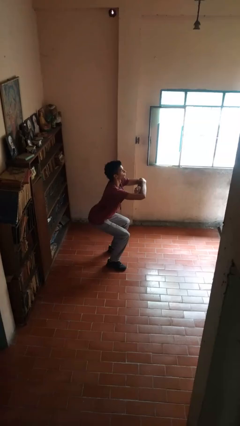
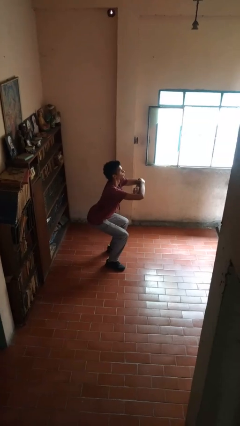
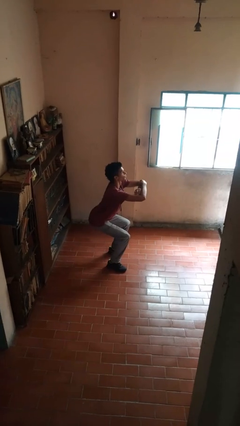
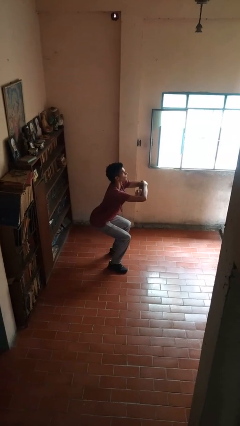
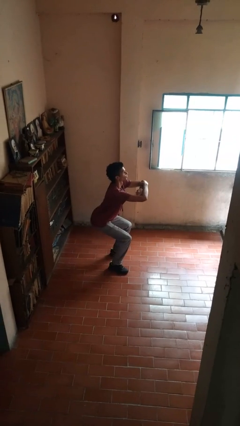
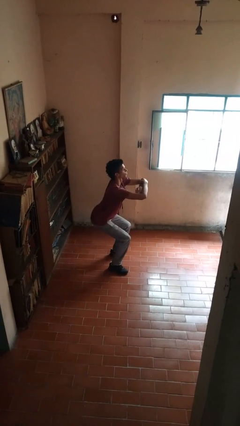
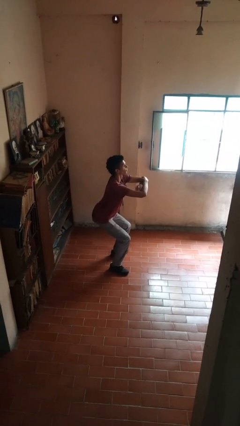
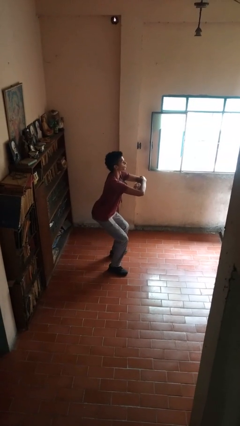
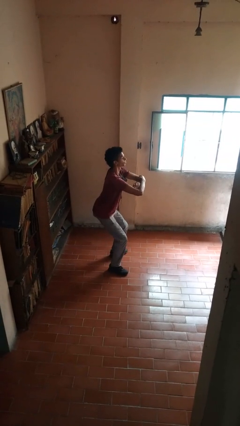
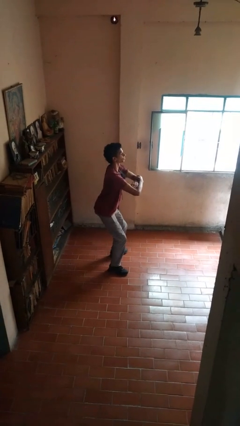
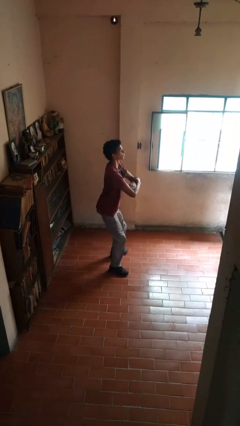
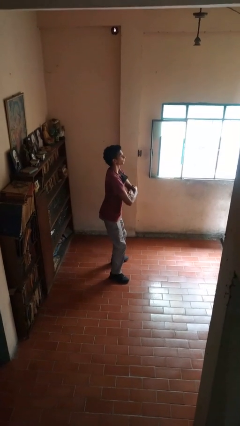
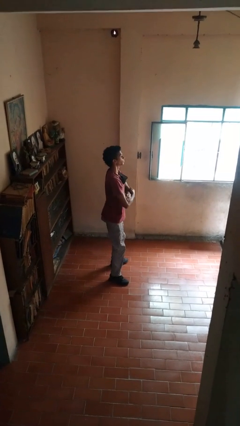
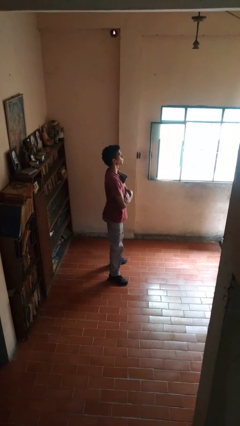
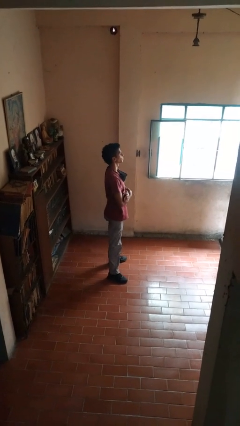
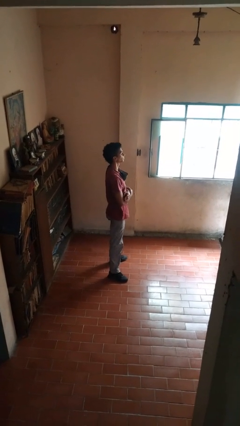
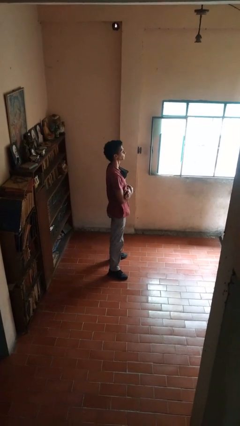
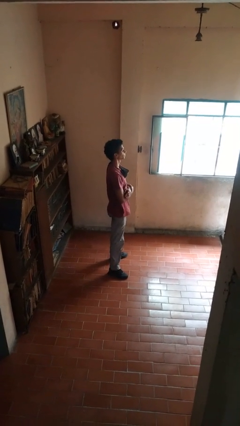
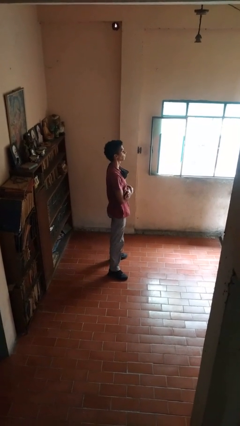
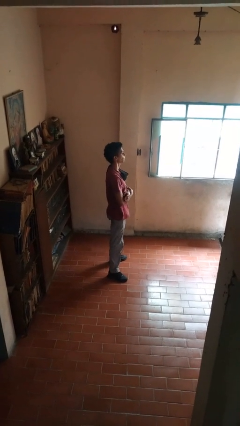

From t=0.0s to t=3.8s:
person stands up

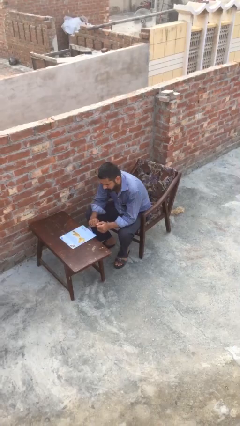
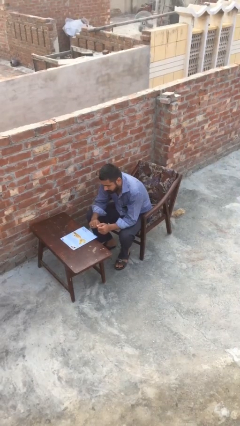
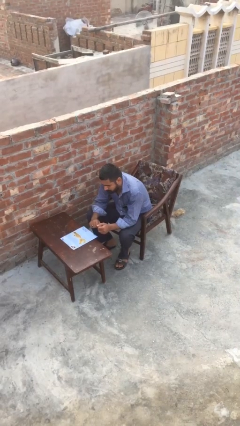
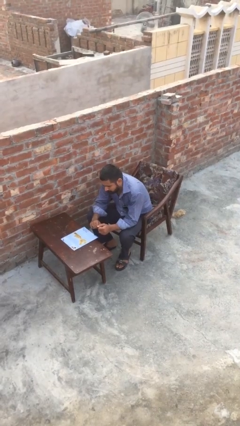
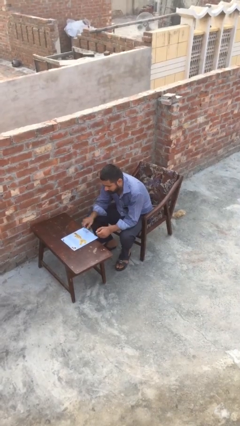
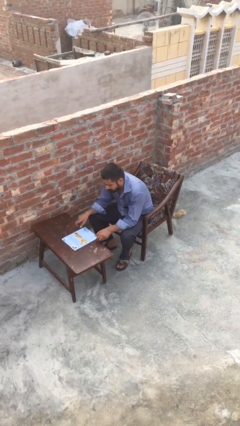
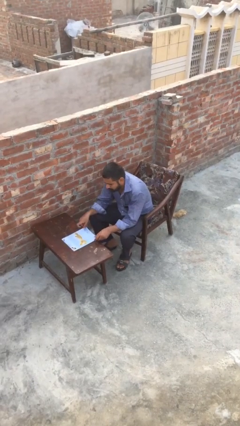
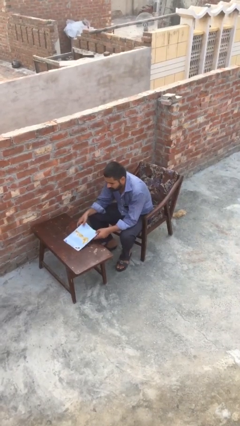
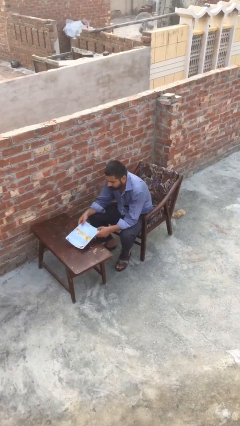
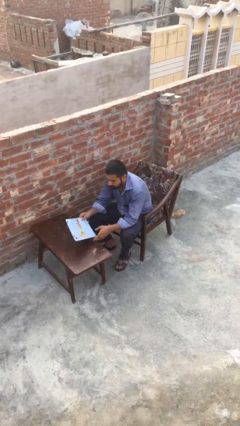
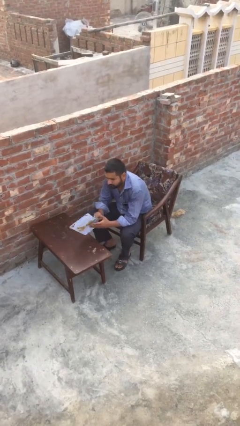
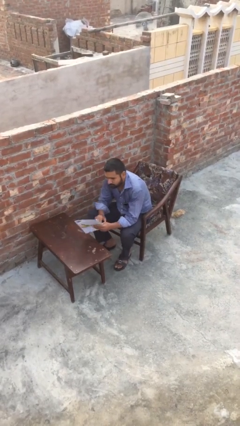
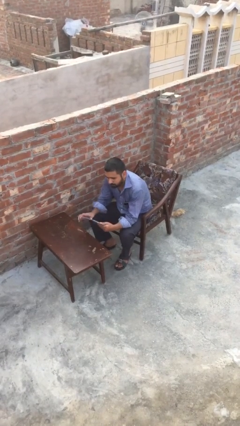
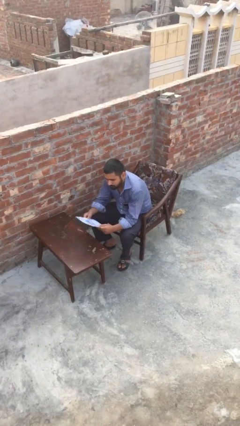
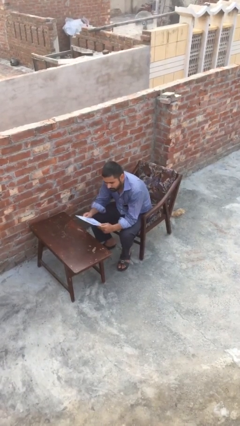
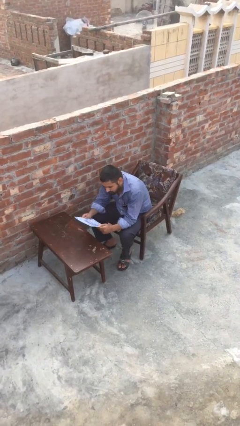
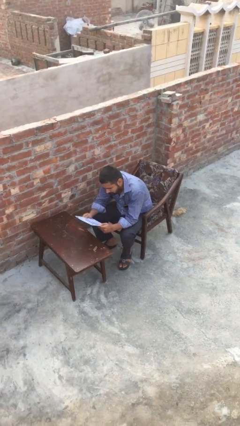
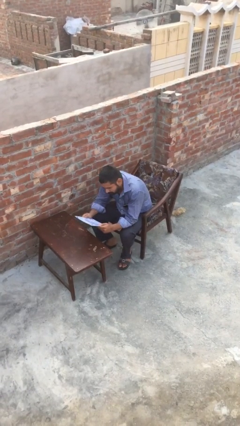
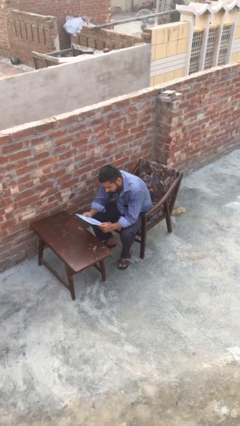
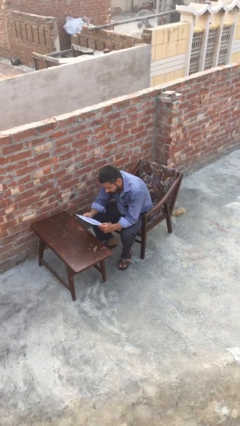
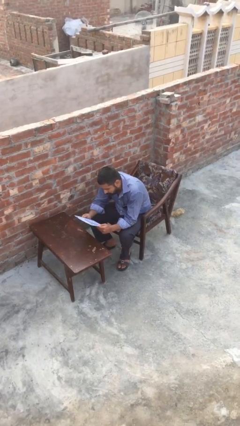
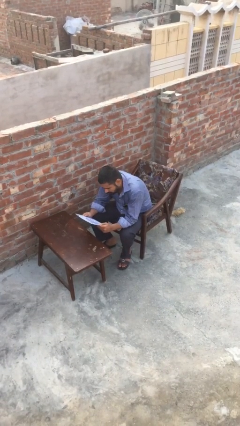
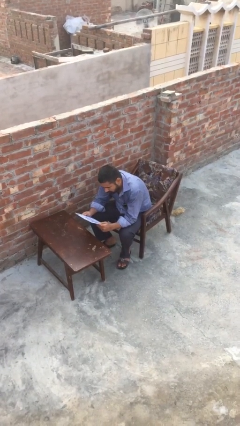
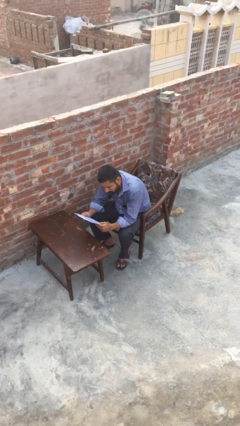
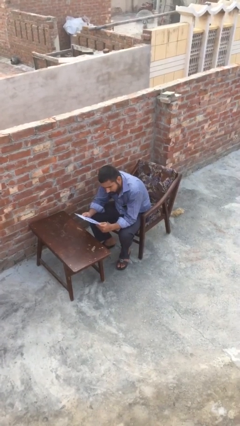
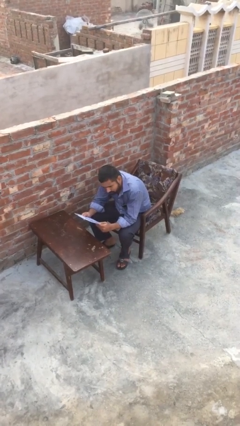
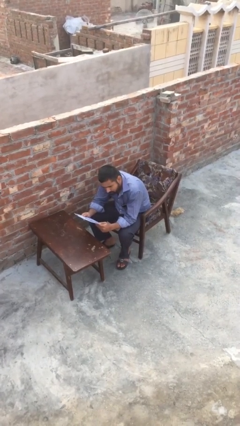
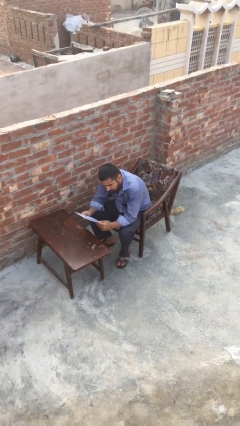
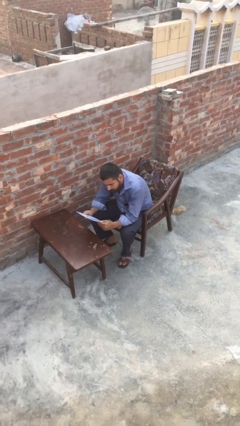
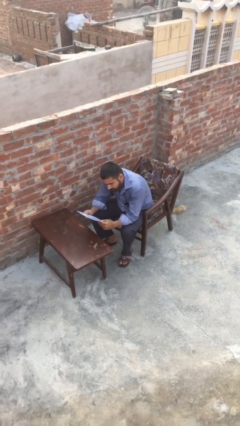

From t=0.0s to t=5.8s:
person reads document

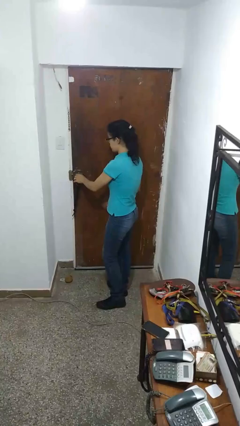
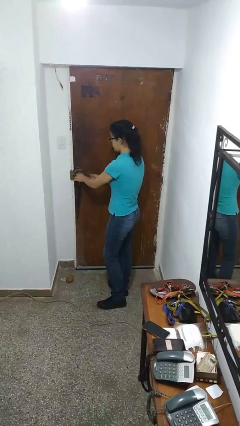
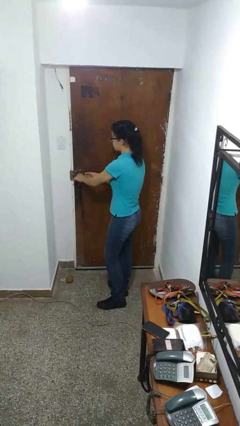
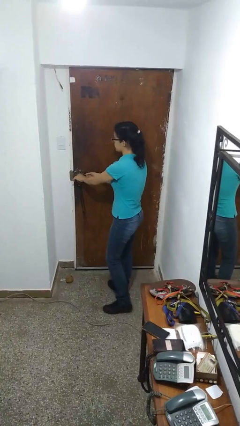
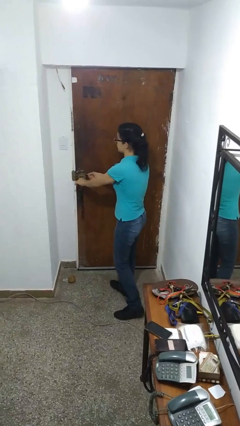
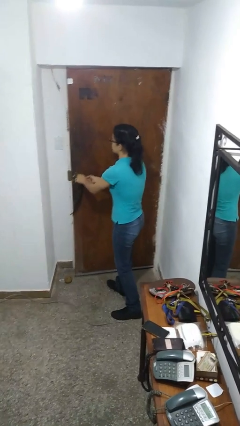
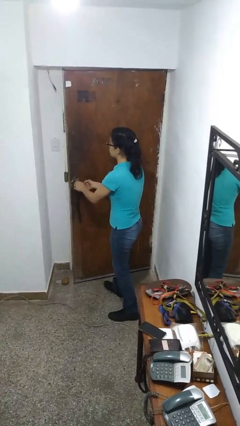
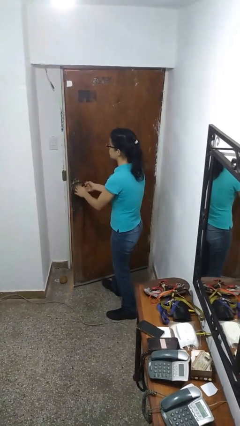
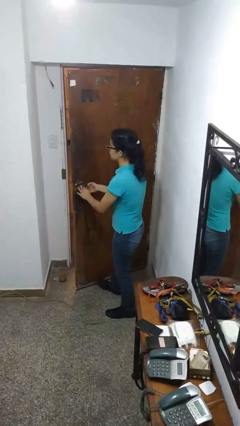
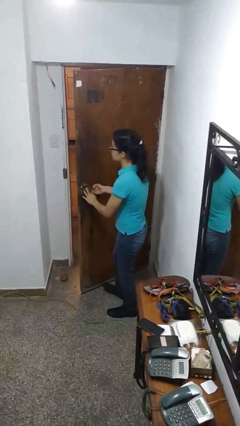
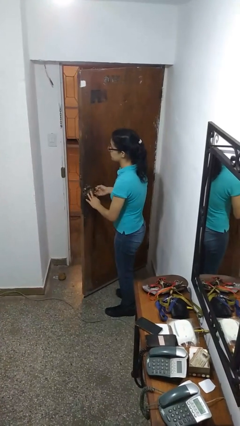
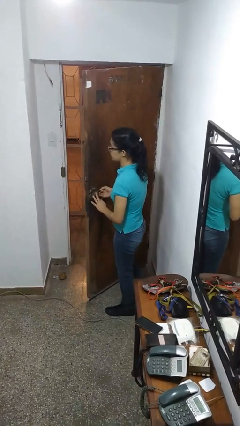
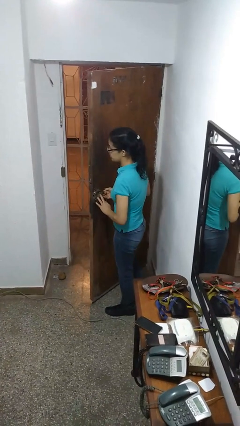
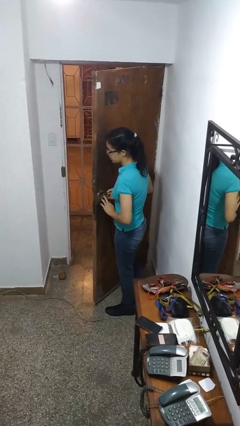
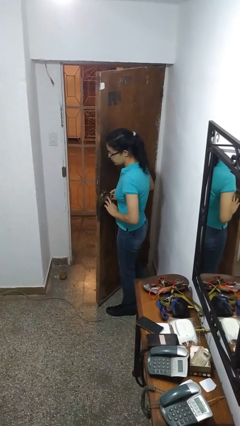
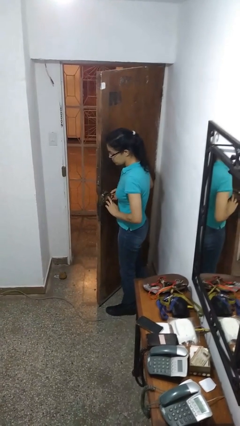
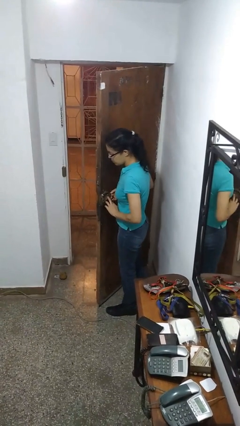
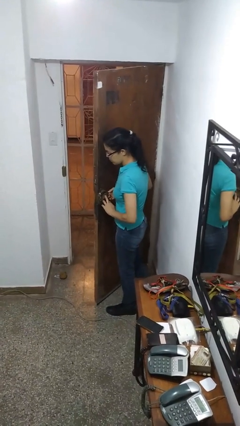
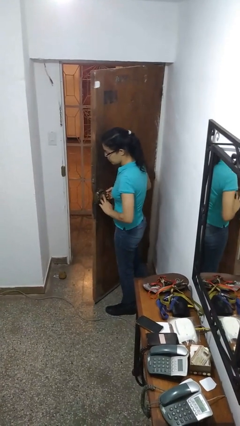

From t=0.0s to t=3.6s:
person opens facility door

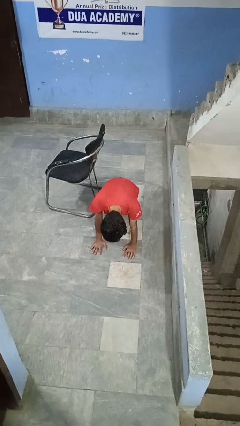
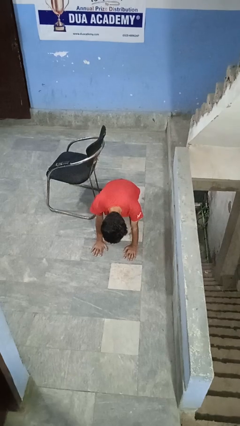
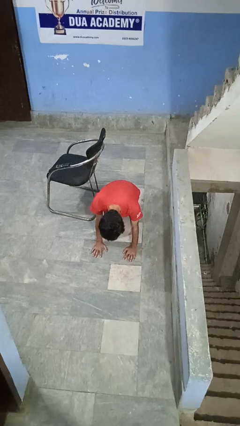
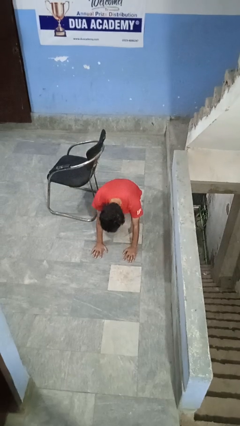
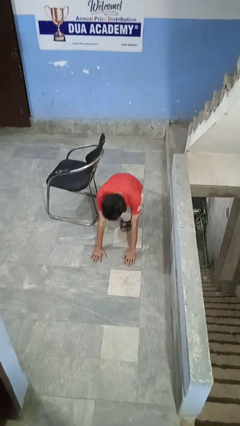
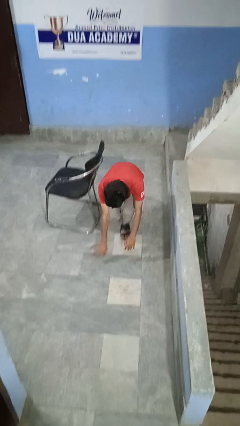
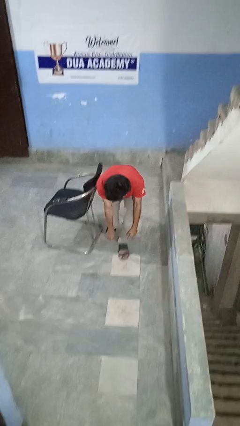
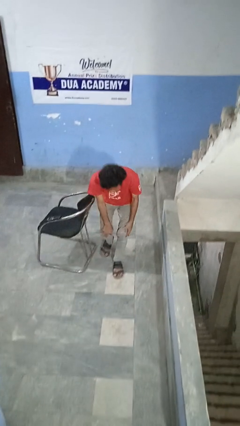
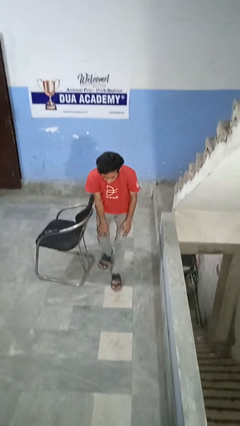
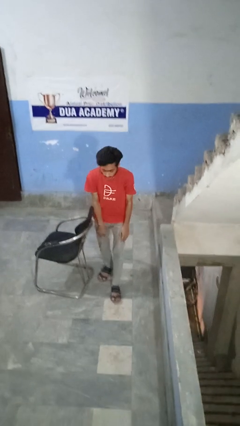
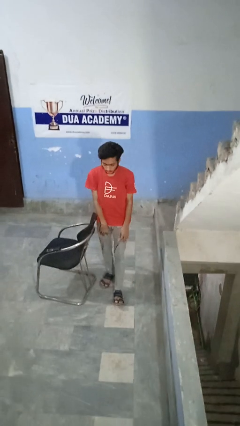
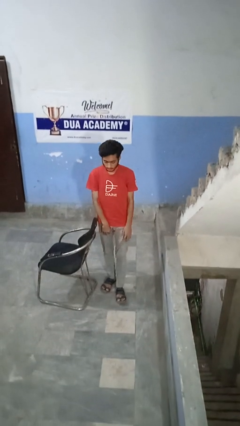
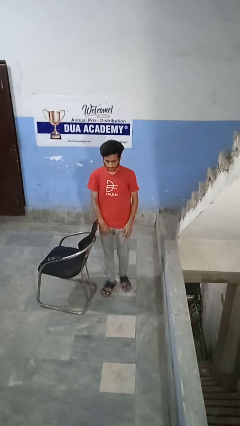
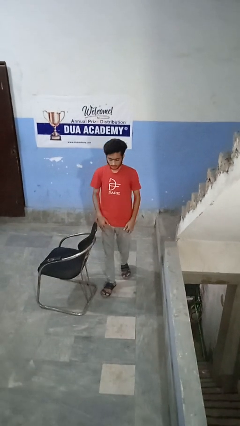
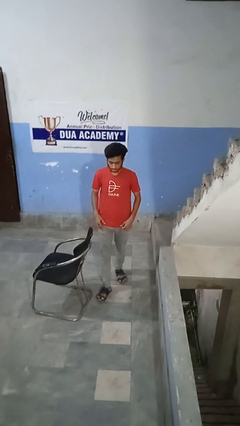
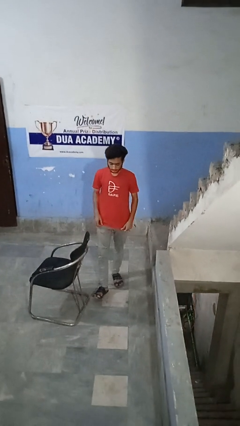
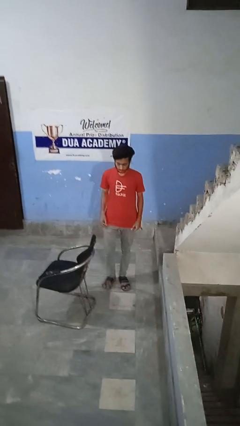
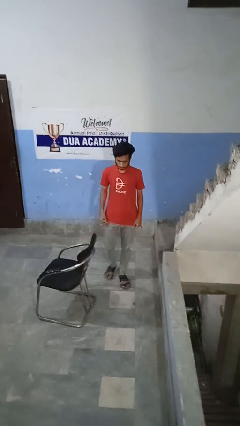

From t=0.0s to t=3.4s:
person stands up from floor

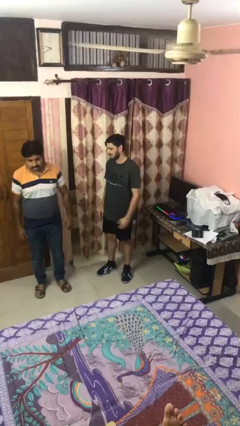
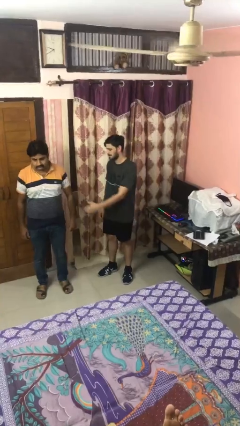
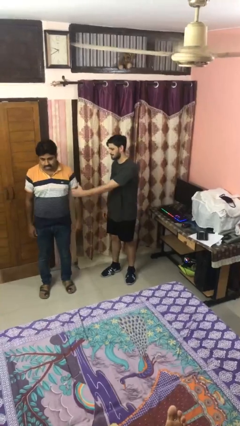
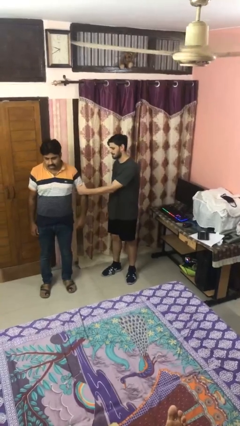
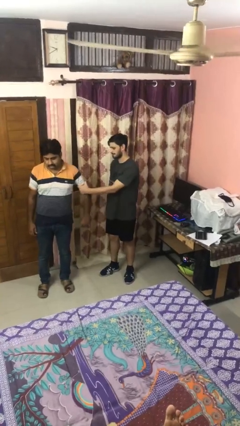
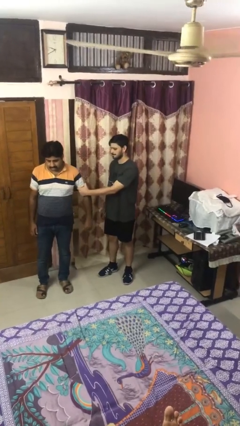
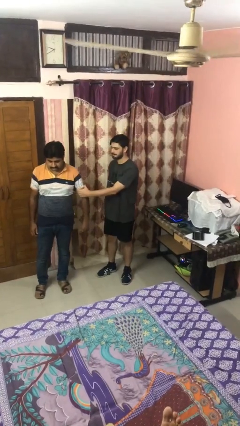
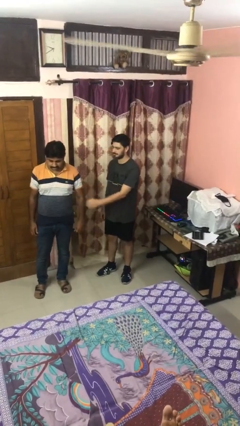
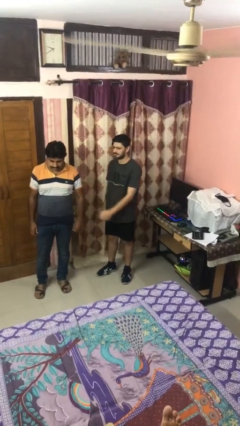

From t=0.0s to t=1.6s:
person grabs person by bicep
